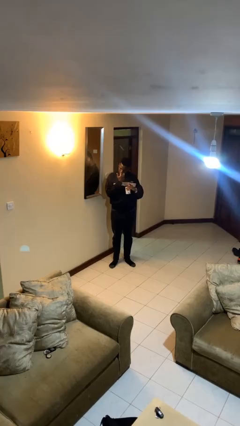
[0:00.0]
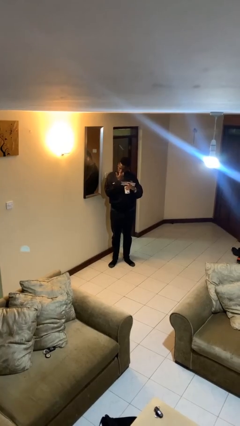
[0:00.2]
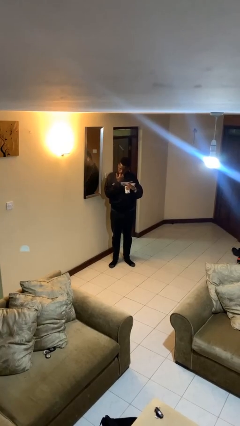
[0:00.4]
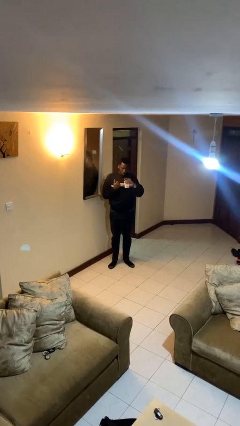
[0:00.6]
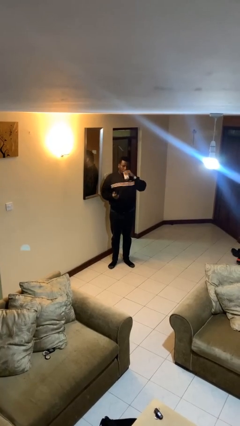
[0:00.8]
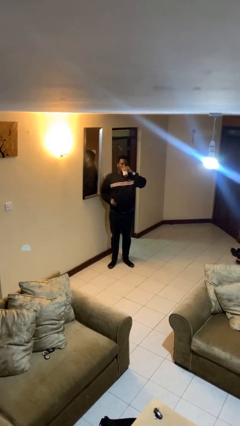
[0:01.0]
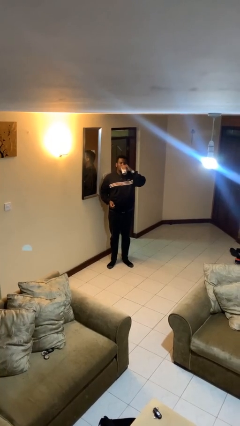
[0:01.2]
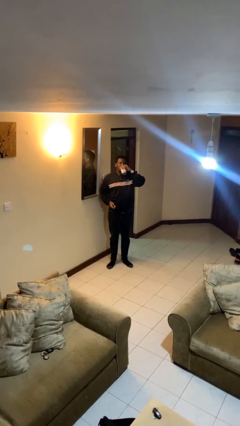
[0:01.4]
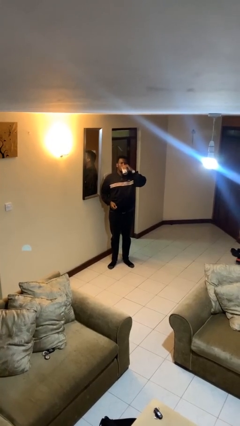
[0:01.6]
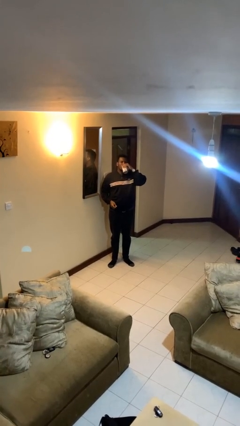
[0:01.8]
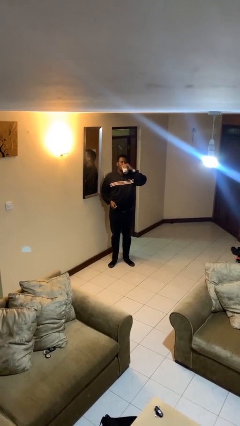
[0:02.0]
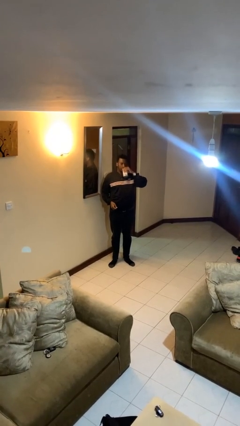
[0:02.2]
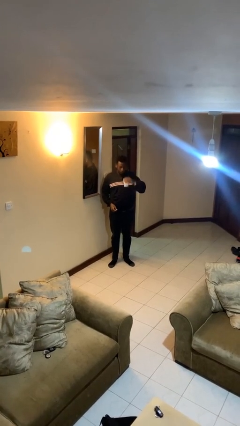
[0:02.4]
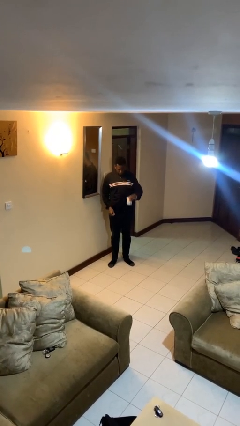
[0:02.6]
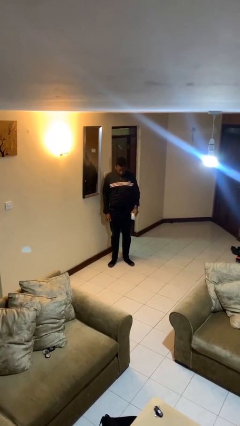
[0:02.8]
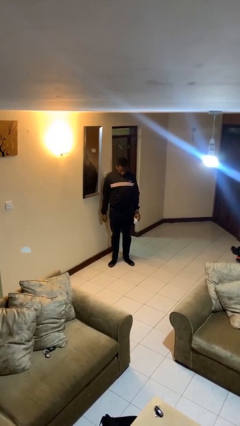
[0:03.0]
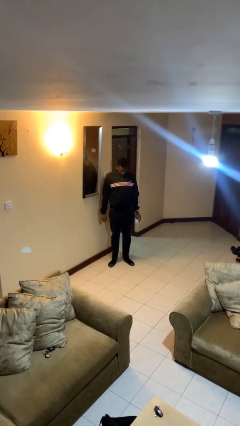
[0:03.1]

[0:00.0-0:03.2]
person drinks from beverage can

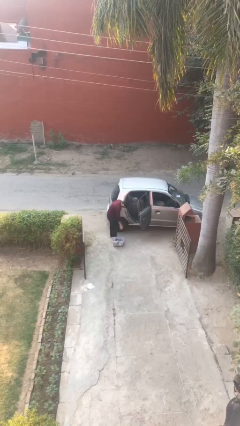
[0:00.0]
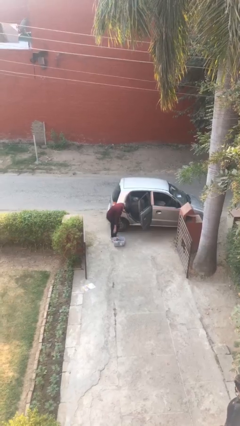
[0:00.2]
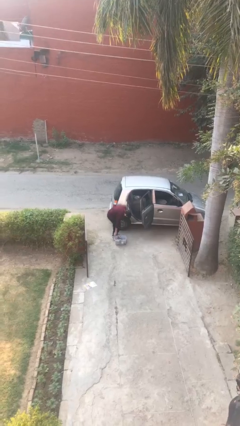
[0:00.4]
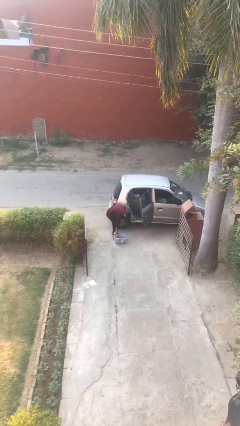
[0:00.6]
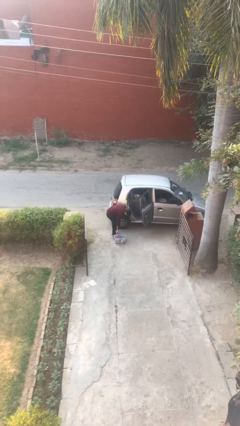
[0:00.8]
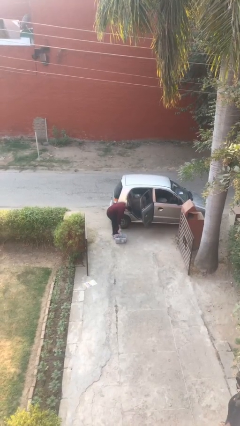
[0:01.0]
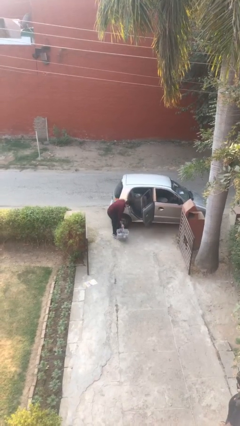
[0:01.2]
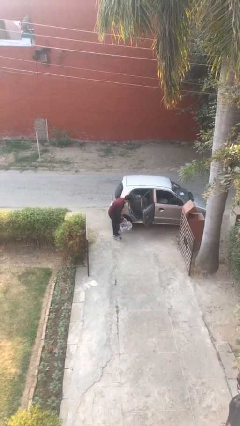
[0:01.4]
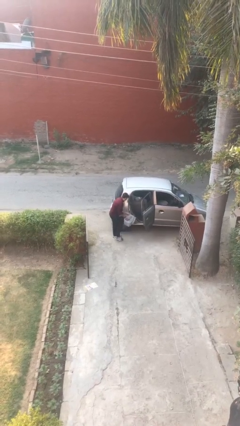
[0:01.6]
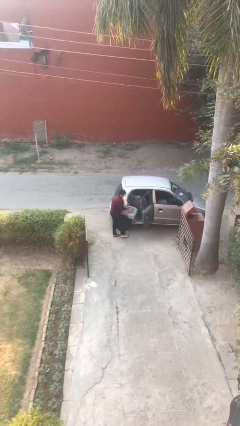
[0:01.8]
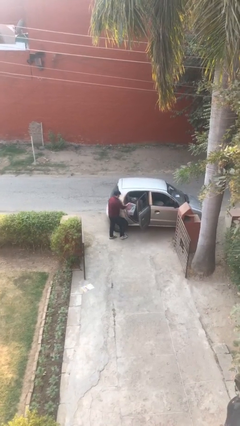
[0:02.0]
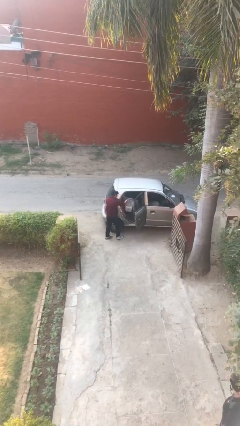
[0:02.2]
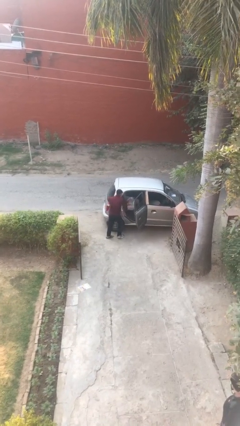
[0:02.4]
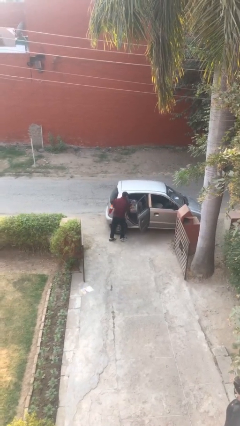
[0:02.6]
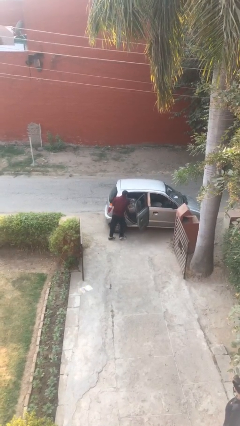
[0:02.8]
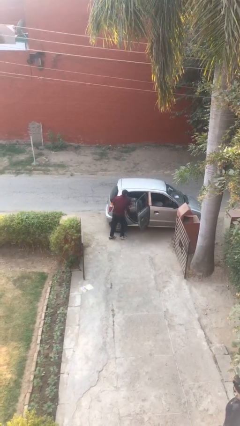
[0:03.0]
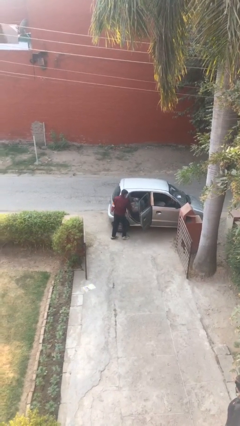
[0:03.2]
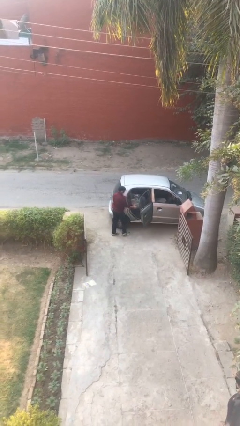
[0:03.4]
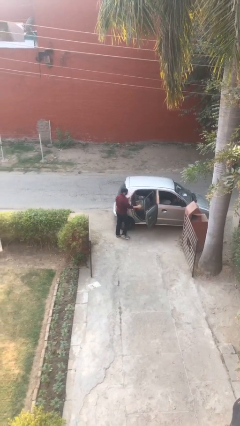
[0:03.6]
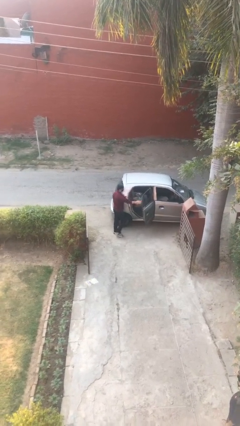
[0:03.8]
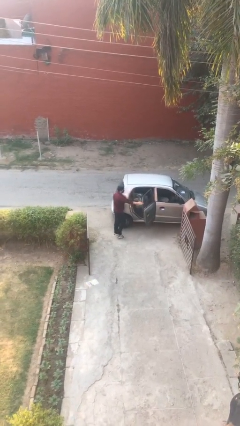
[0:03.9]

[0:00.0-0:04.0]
person loads car

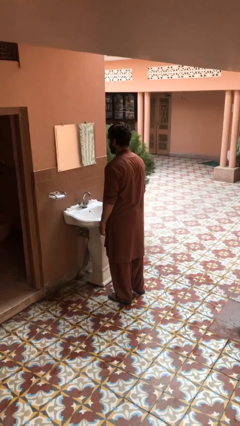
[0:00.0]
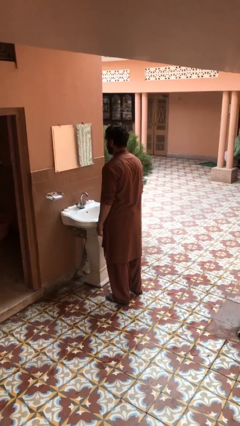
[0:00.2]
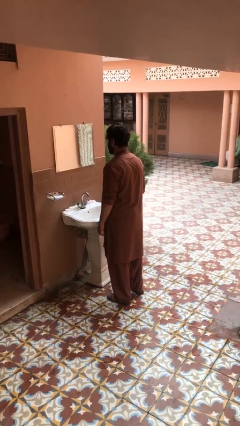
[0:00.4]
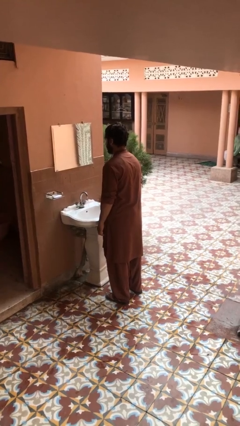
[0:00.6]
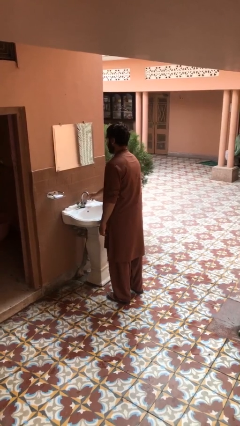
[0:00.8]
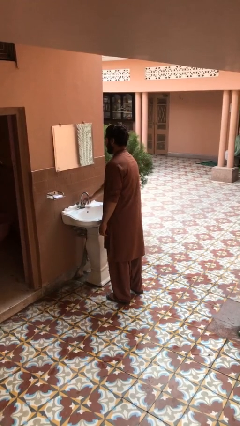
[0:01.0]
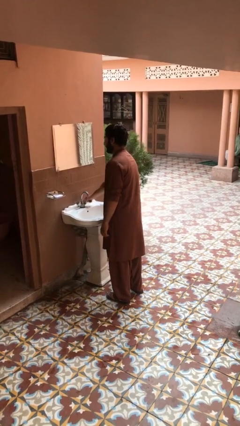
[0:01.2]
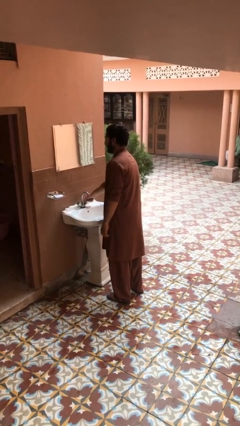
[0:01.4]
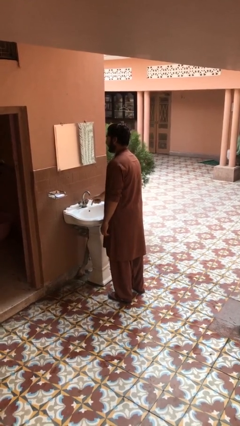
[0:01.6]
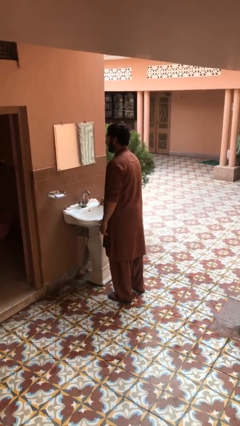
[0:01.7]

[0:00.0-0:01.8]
person turns off faucet

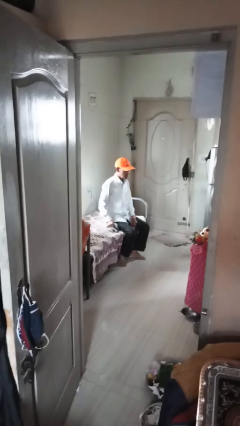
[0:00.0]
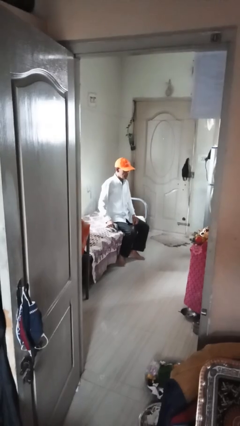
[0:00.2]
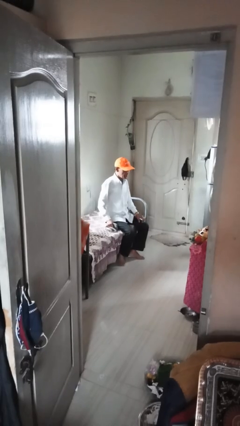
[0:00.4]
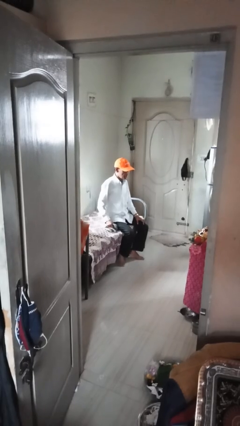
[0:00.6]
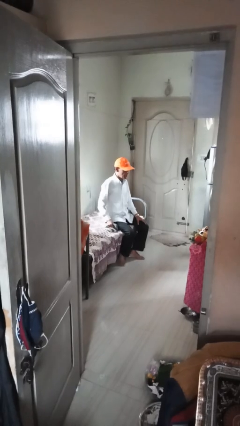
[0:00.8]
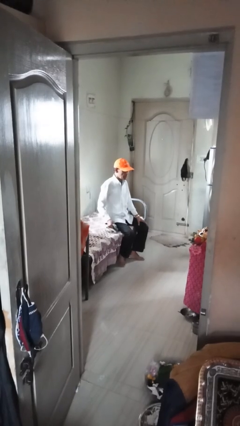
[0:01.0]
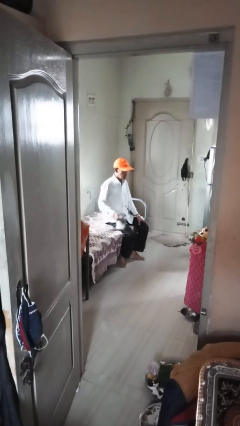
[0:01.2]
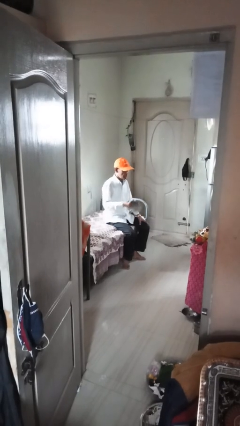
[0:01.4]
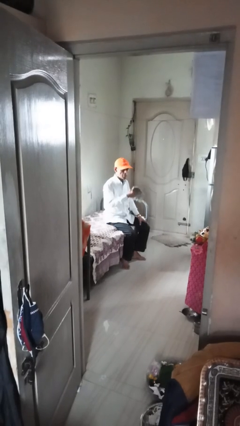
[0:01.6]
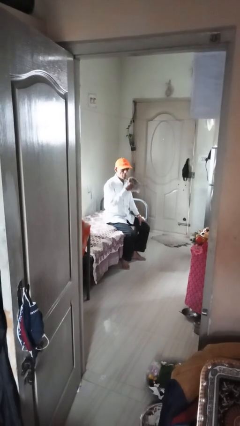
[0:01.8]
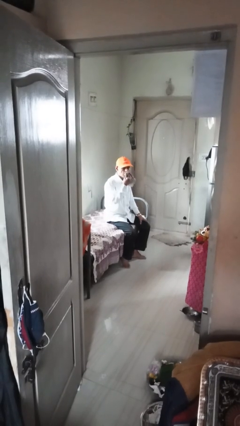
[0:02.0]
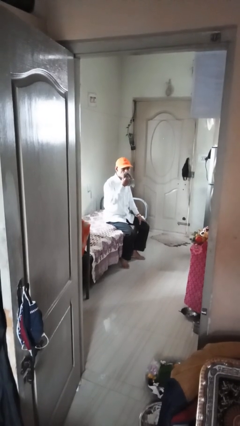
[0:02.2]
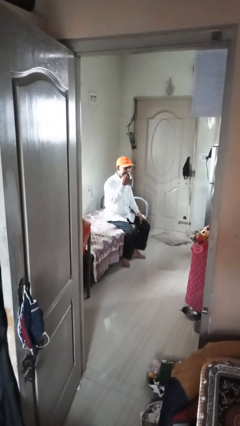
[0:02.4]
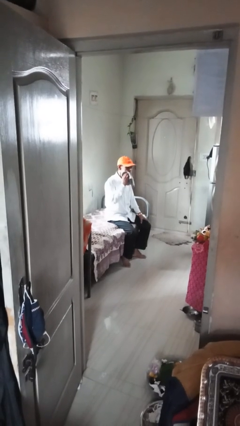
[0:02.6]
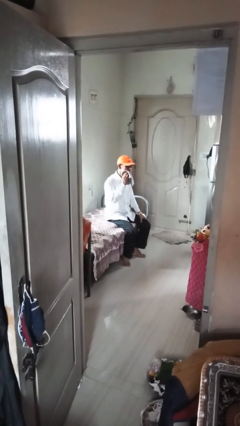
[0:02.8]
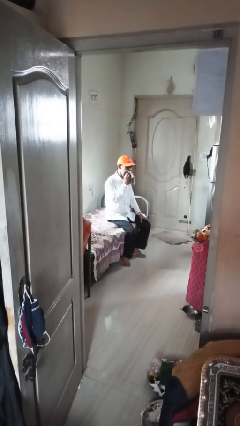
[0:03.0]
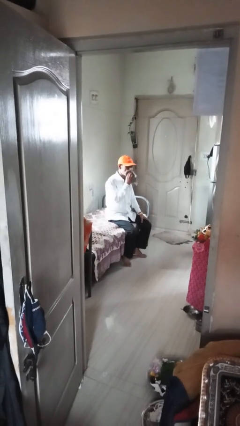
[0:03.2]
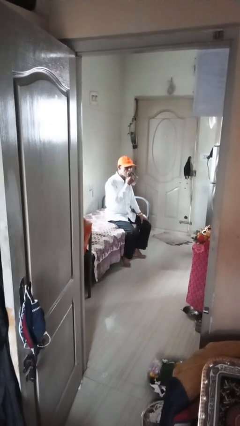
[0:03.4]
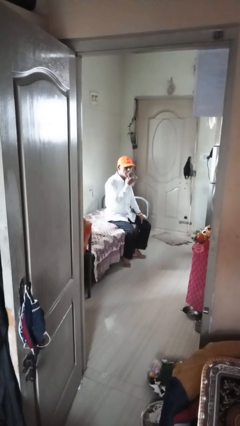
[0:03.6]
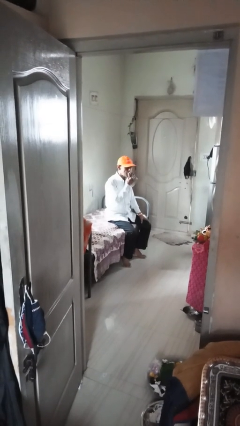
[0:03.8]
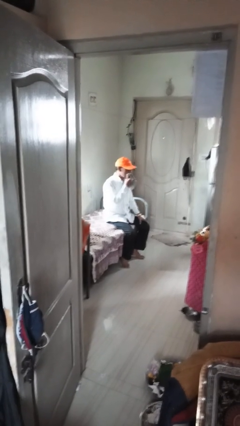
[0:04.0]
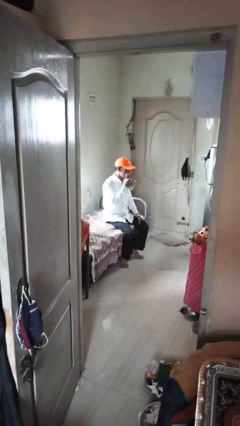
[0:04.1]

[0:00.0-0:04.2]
person wipes mouth with napkin

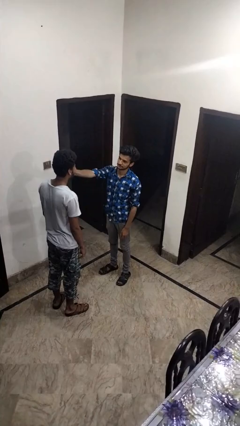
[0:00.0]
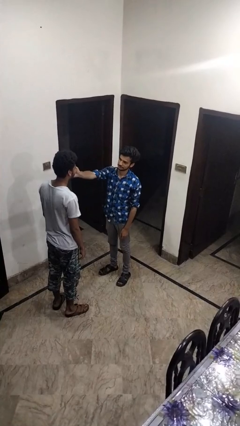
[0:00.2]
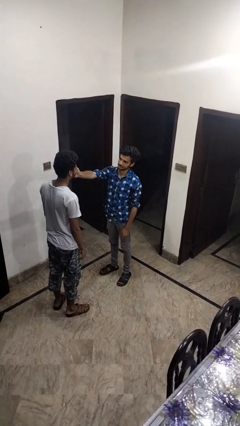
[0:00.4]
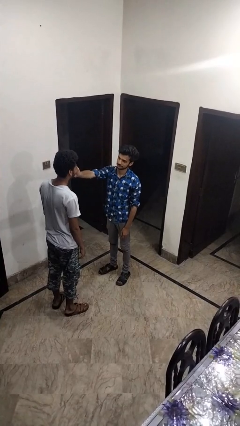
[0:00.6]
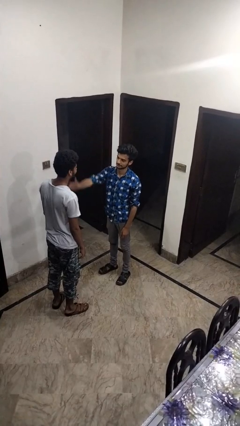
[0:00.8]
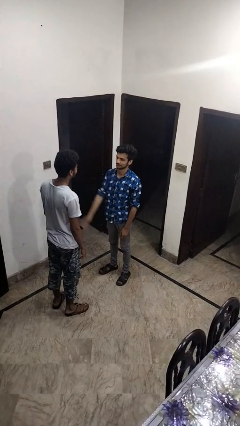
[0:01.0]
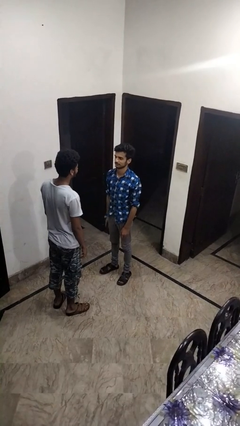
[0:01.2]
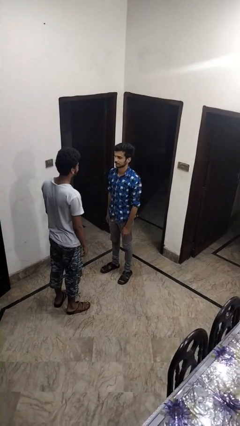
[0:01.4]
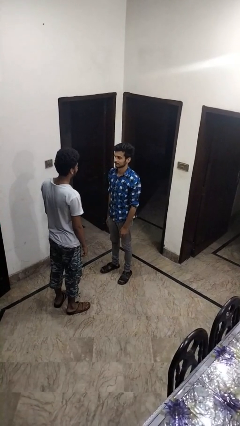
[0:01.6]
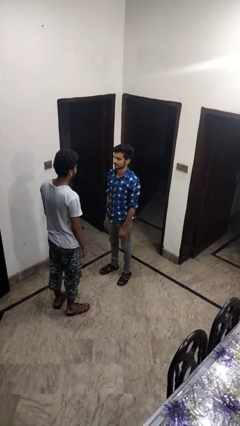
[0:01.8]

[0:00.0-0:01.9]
person touches face of person

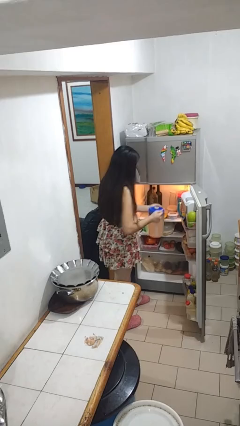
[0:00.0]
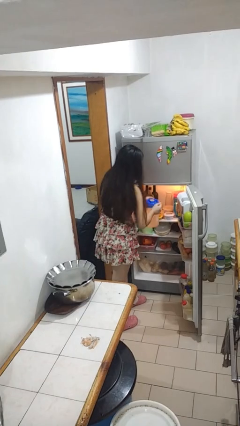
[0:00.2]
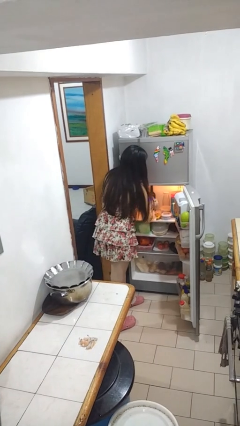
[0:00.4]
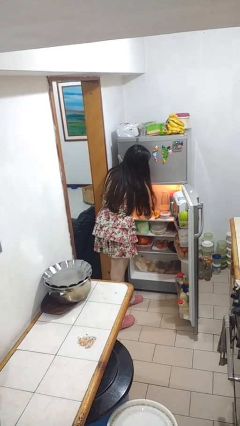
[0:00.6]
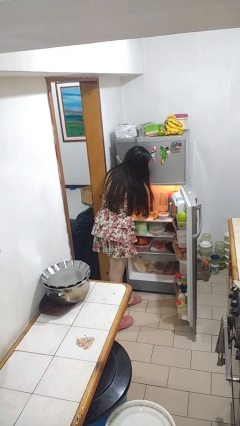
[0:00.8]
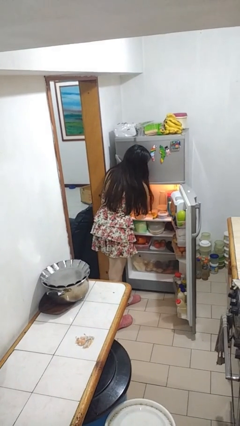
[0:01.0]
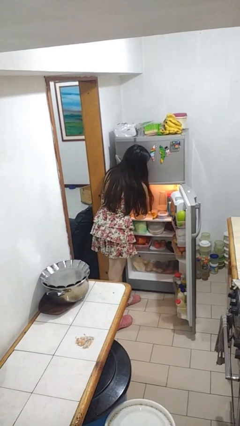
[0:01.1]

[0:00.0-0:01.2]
person puts object into refrigerator

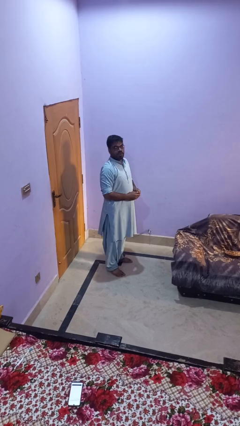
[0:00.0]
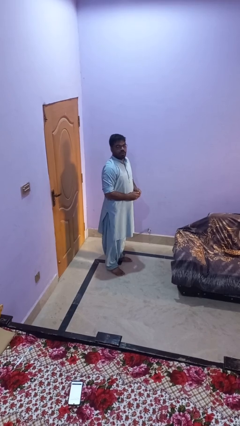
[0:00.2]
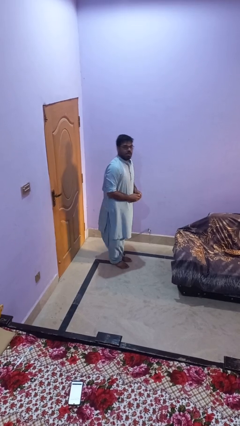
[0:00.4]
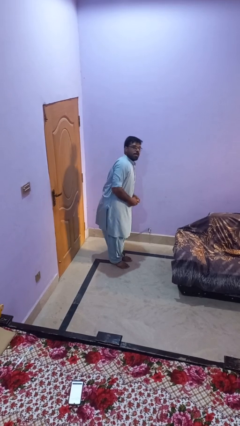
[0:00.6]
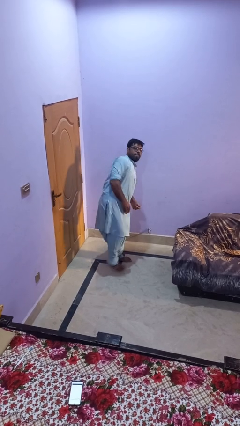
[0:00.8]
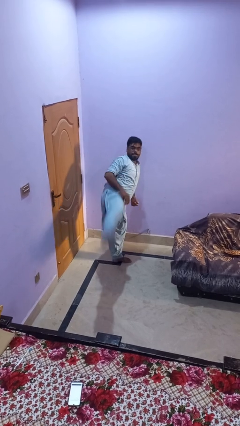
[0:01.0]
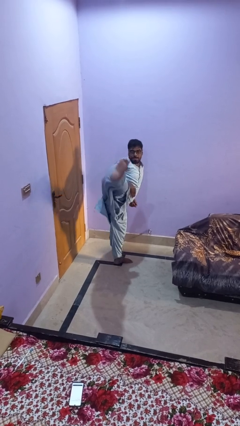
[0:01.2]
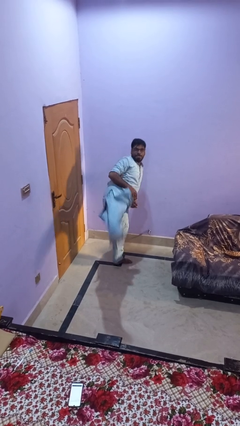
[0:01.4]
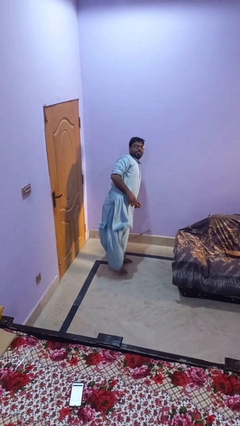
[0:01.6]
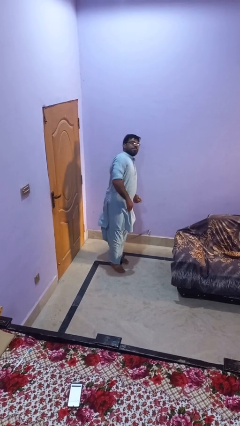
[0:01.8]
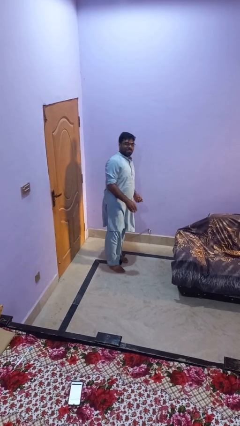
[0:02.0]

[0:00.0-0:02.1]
person karate kicks
